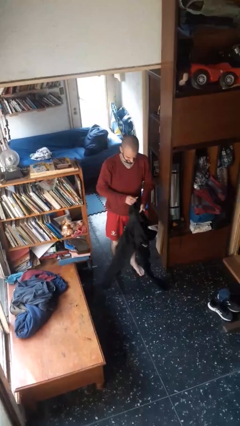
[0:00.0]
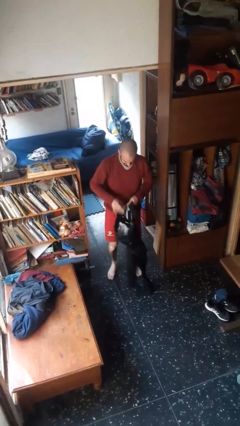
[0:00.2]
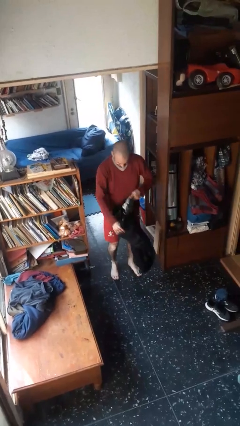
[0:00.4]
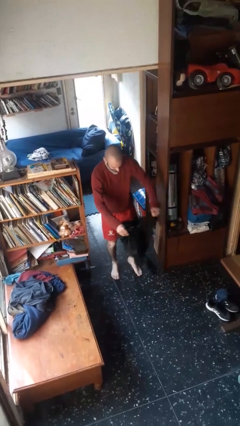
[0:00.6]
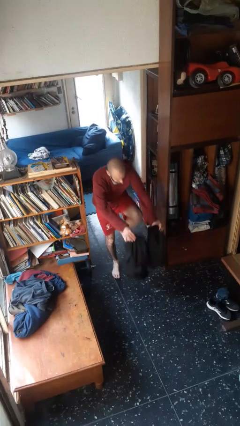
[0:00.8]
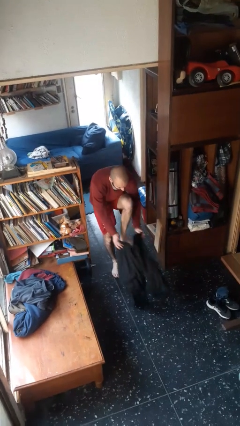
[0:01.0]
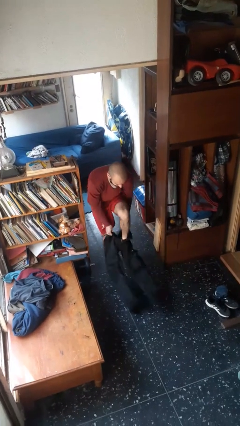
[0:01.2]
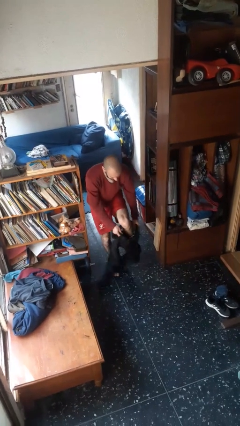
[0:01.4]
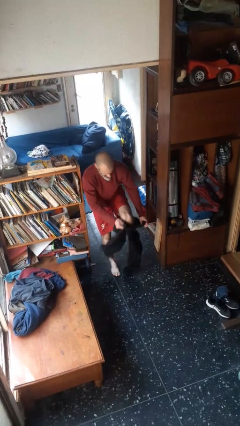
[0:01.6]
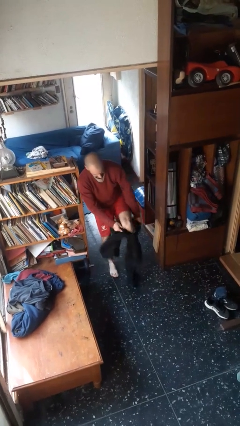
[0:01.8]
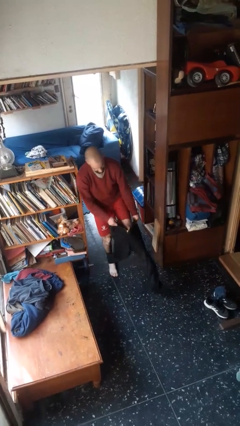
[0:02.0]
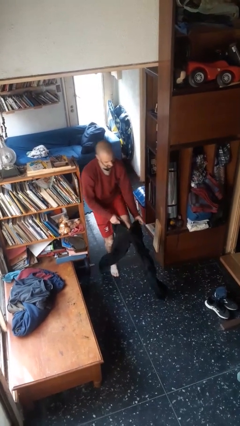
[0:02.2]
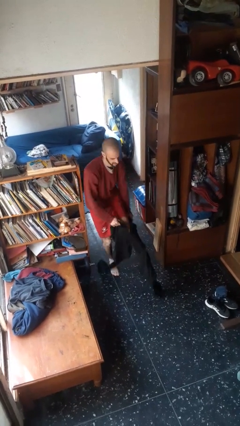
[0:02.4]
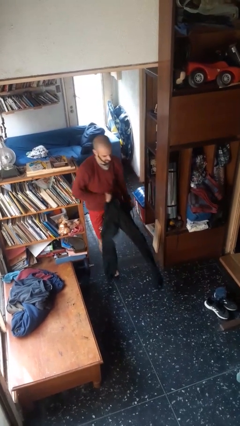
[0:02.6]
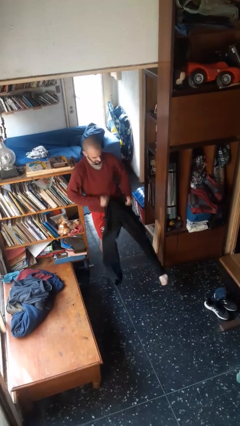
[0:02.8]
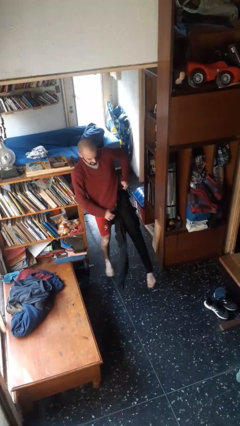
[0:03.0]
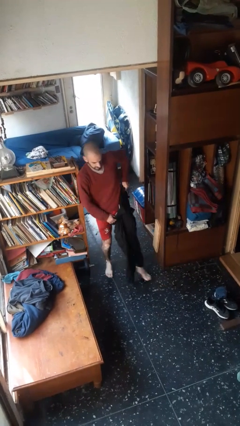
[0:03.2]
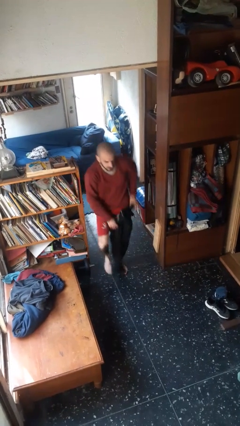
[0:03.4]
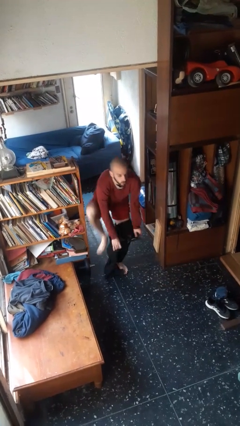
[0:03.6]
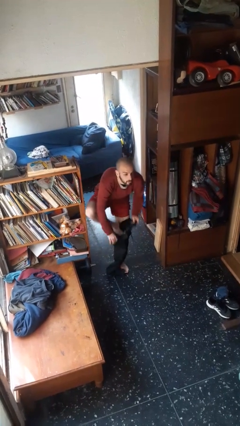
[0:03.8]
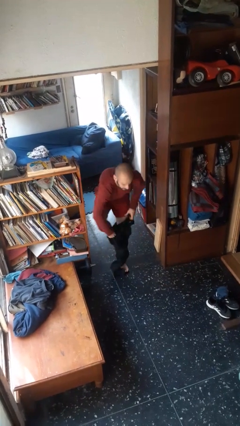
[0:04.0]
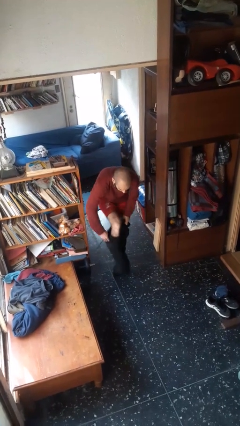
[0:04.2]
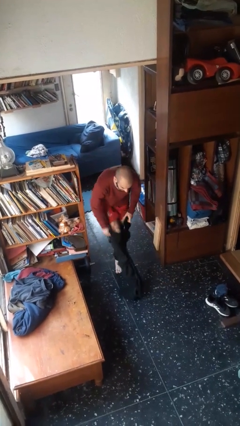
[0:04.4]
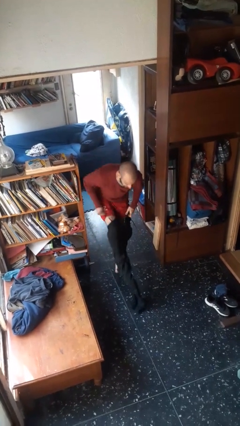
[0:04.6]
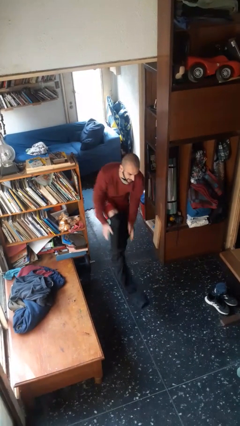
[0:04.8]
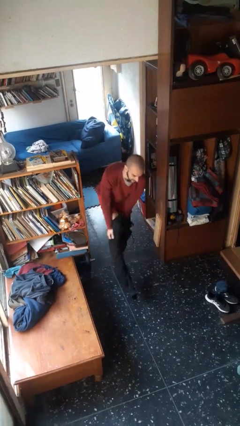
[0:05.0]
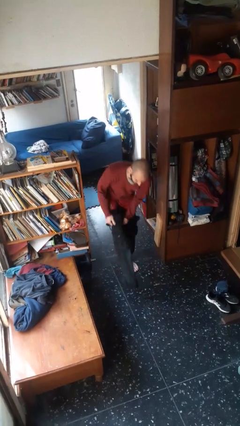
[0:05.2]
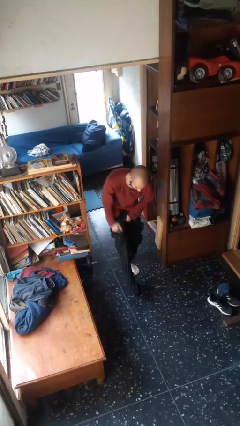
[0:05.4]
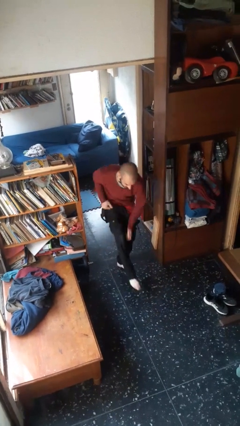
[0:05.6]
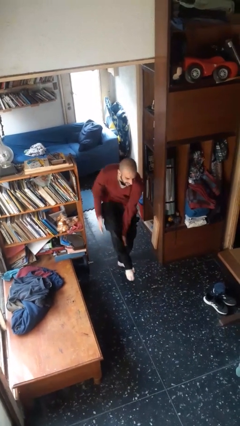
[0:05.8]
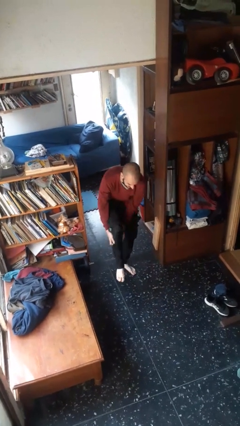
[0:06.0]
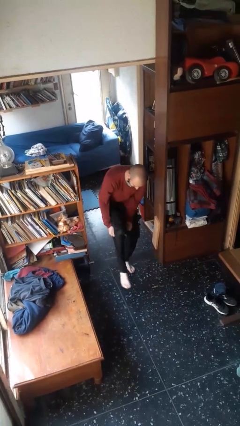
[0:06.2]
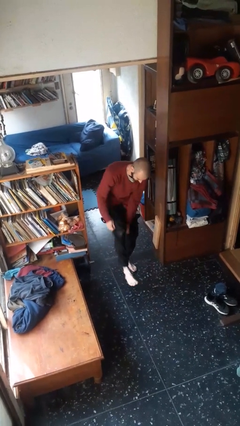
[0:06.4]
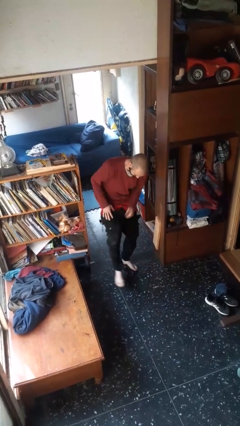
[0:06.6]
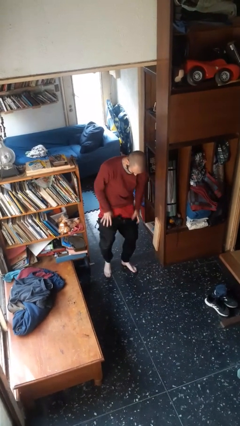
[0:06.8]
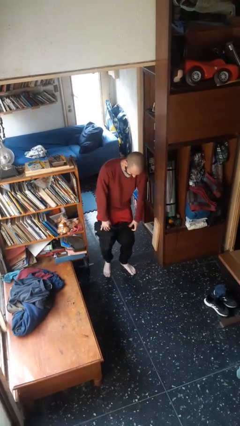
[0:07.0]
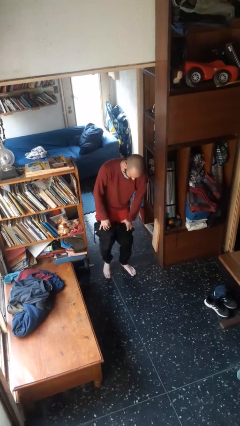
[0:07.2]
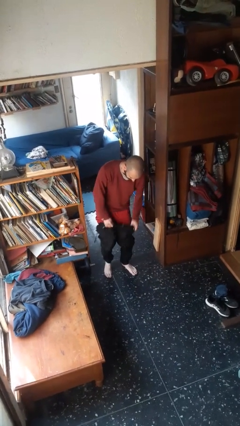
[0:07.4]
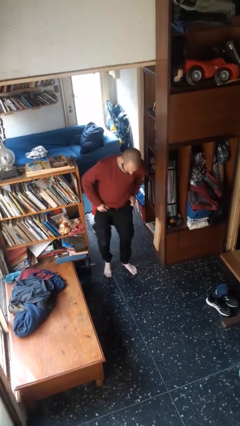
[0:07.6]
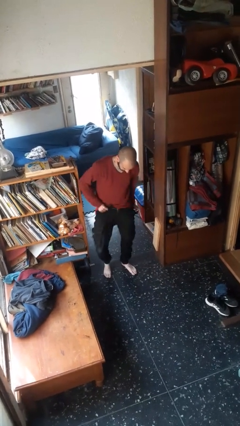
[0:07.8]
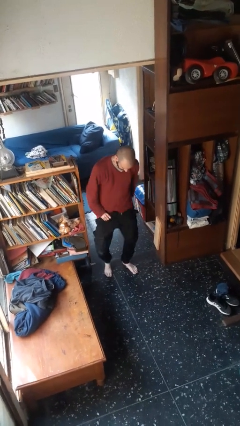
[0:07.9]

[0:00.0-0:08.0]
person puts on pants

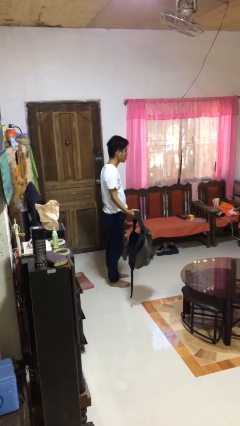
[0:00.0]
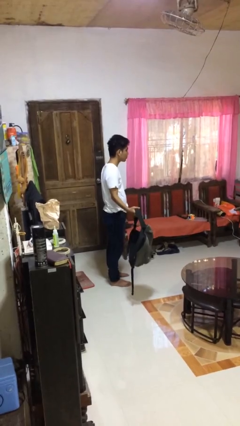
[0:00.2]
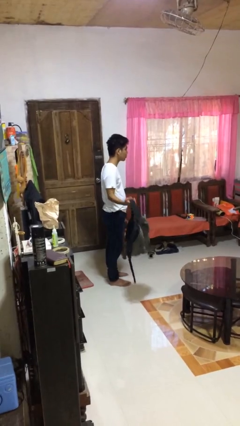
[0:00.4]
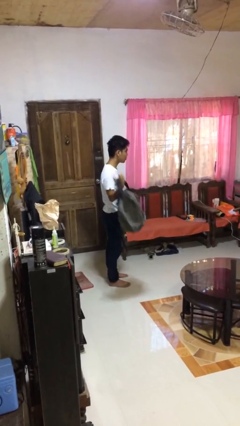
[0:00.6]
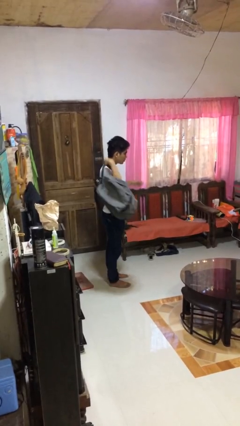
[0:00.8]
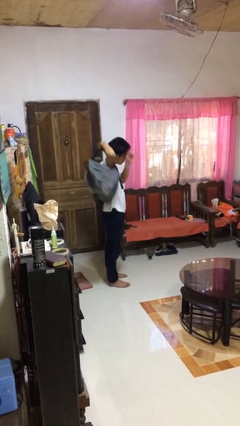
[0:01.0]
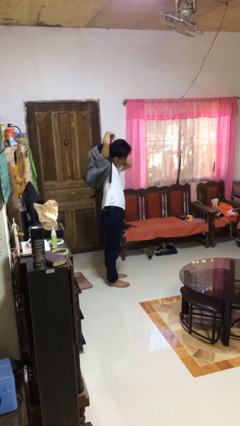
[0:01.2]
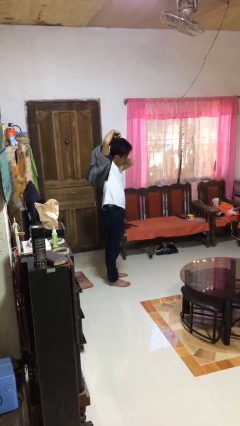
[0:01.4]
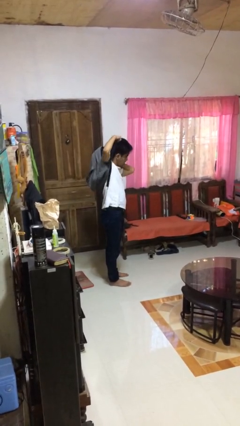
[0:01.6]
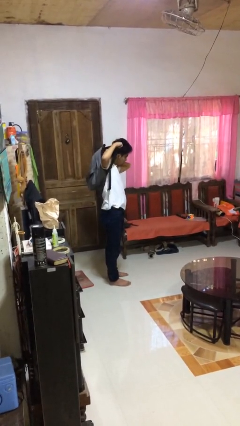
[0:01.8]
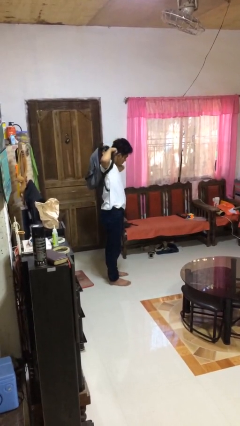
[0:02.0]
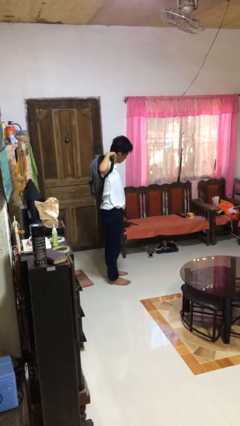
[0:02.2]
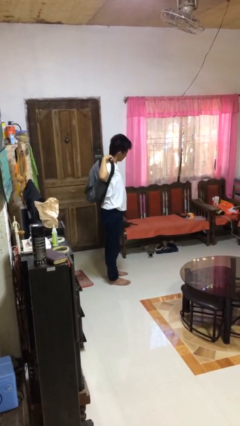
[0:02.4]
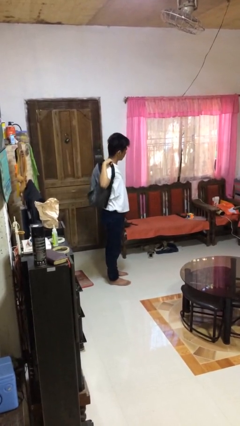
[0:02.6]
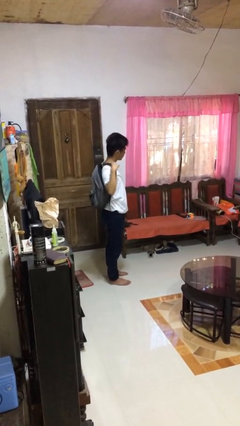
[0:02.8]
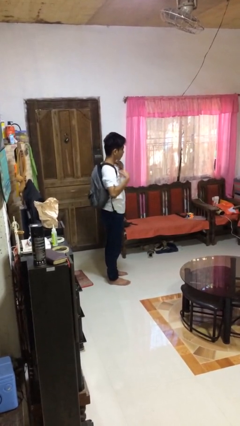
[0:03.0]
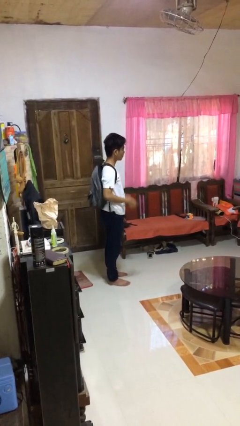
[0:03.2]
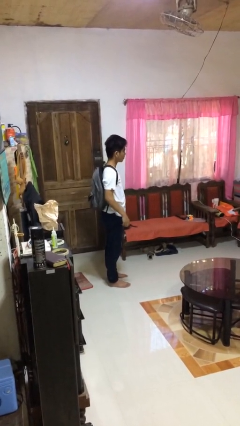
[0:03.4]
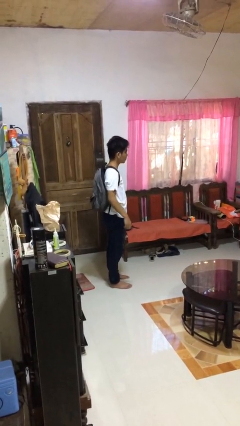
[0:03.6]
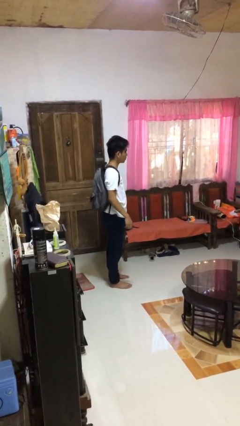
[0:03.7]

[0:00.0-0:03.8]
person puts on backpack

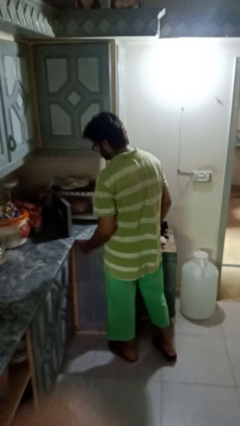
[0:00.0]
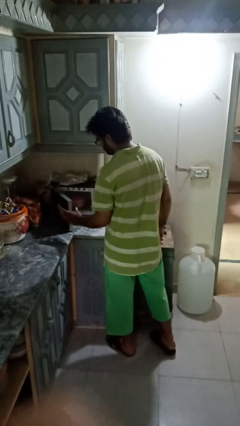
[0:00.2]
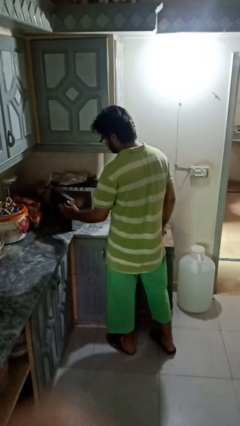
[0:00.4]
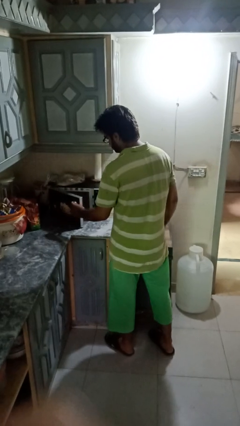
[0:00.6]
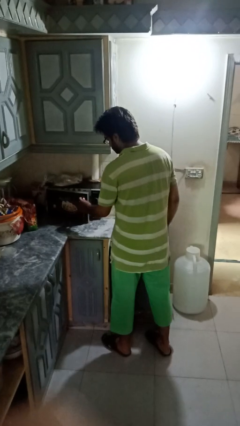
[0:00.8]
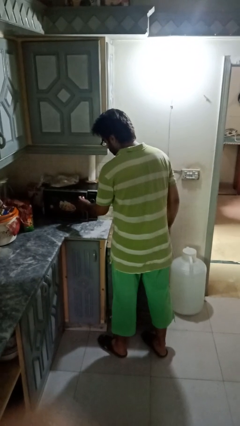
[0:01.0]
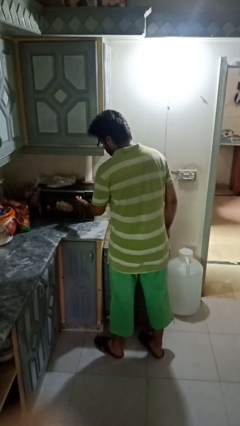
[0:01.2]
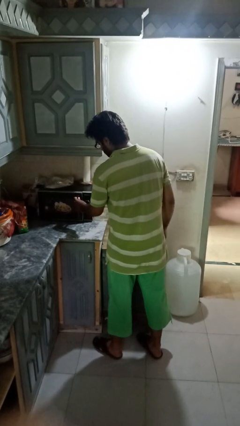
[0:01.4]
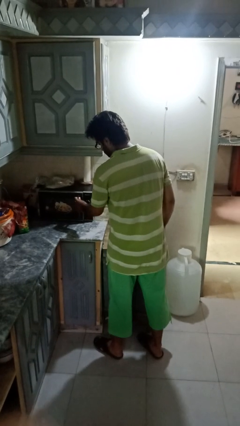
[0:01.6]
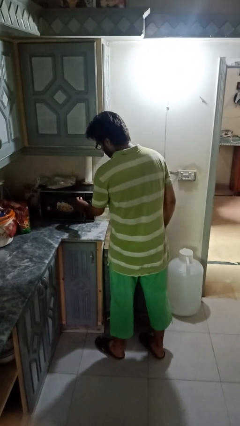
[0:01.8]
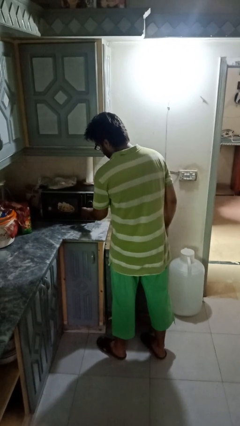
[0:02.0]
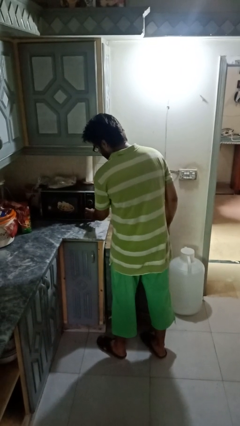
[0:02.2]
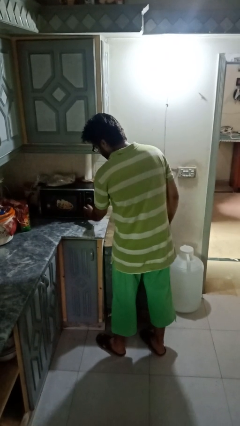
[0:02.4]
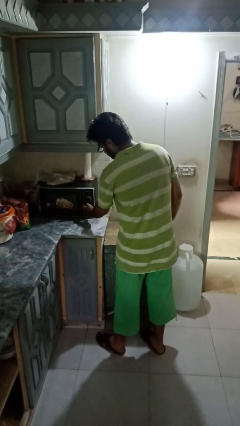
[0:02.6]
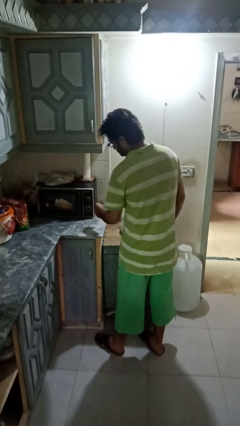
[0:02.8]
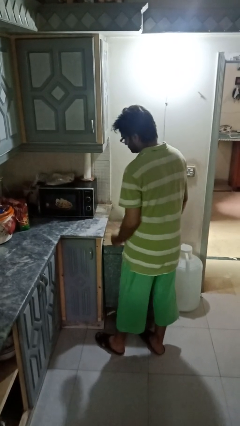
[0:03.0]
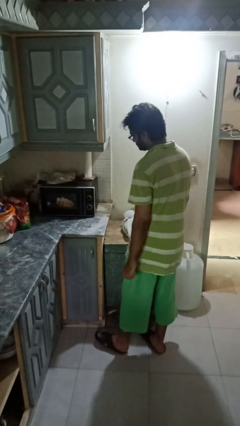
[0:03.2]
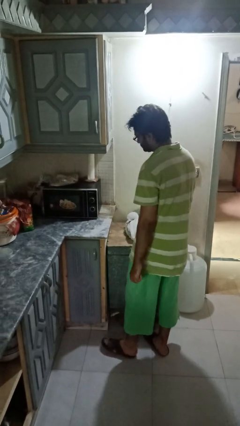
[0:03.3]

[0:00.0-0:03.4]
person closes microwave

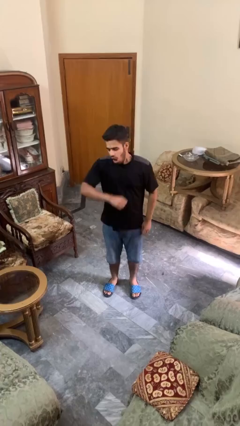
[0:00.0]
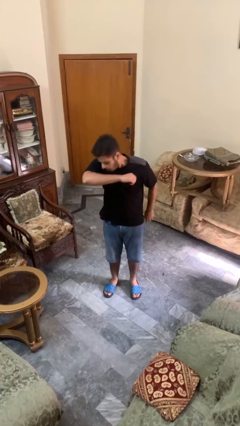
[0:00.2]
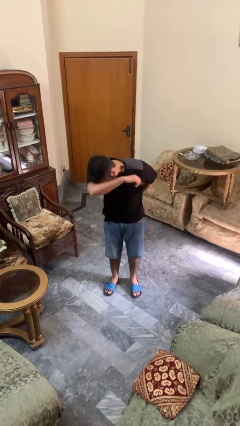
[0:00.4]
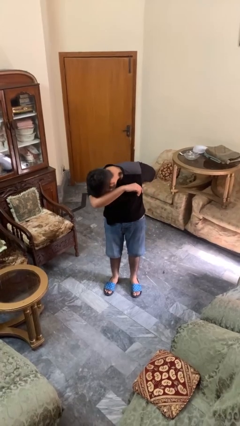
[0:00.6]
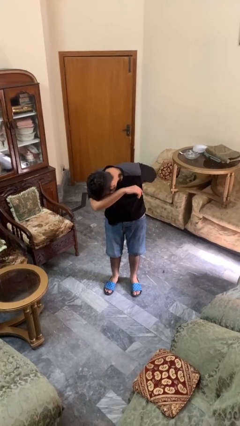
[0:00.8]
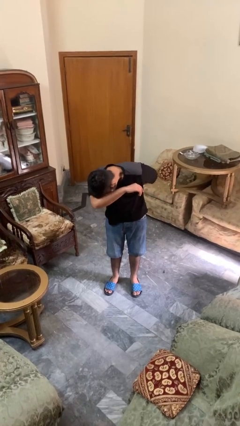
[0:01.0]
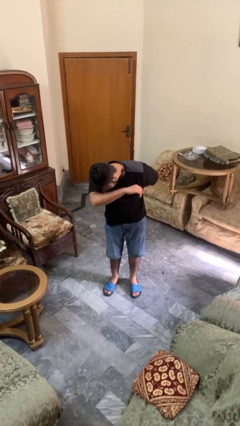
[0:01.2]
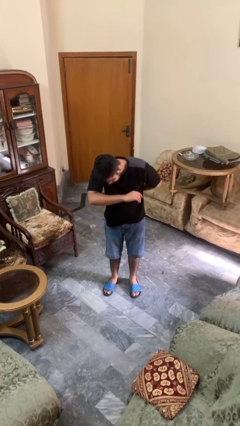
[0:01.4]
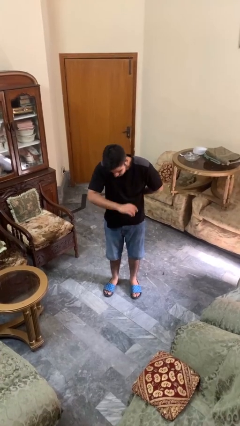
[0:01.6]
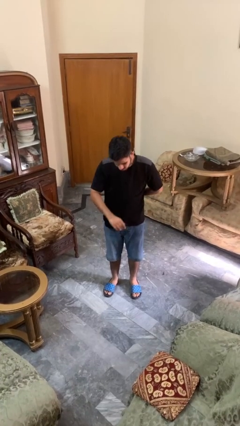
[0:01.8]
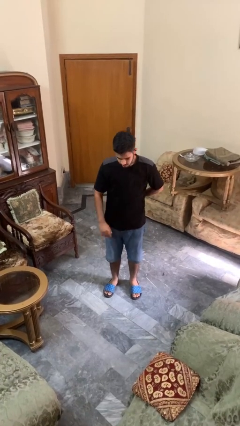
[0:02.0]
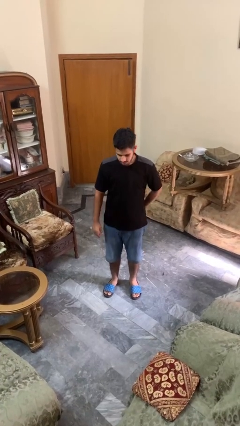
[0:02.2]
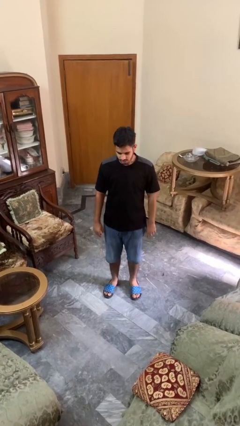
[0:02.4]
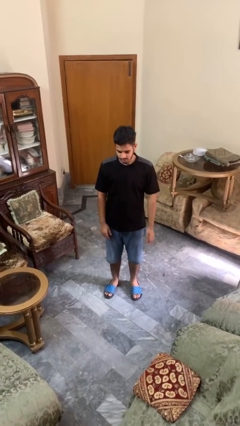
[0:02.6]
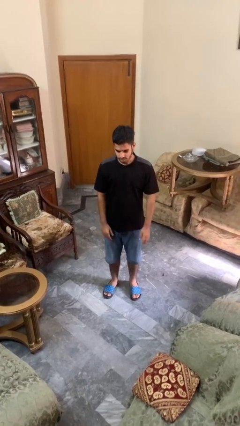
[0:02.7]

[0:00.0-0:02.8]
person sneezes into arm
